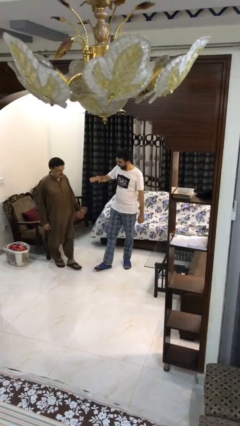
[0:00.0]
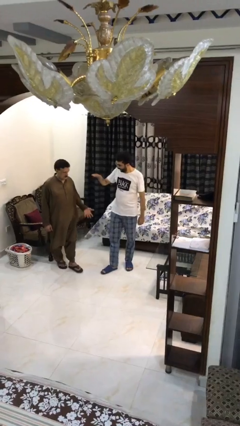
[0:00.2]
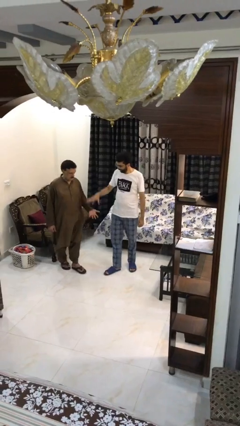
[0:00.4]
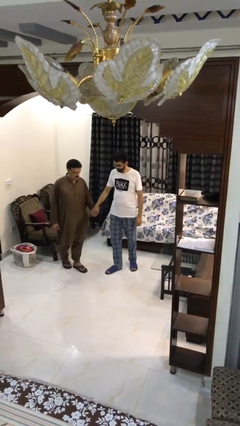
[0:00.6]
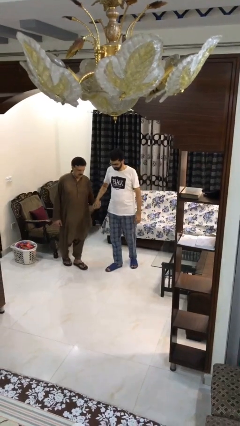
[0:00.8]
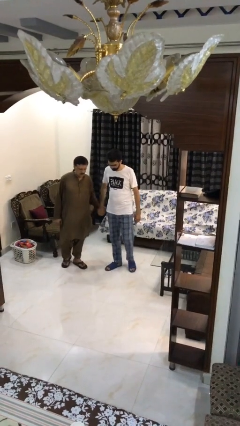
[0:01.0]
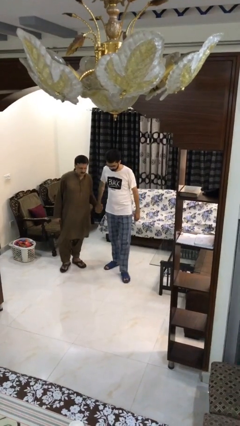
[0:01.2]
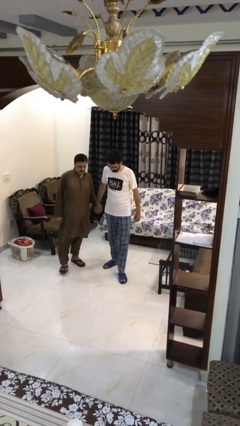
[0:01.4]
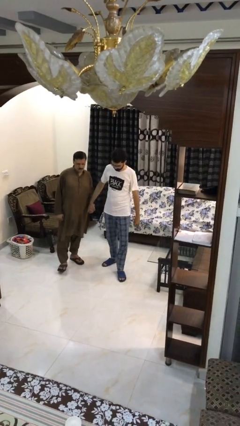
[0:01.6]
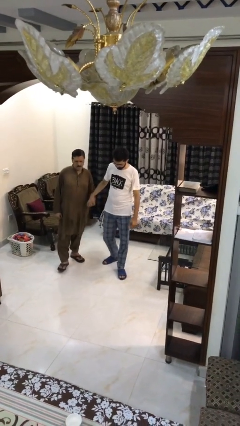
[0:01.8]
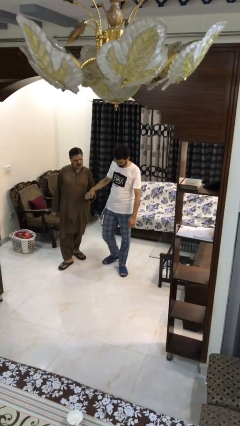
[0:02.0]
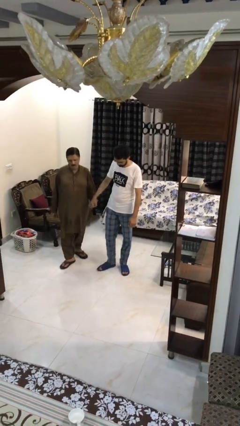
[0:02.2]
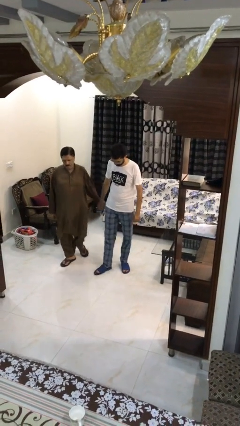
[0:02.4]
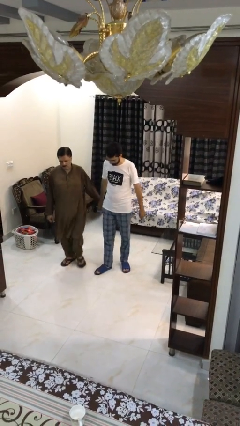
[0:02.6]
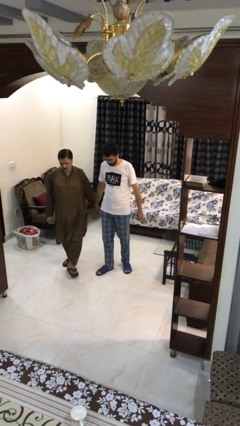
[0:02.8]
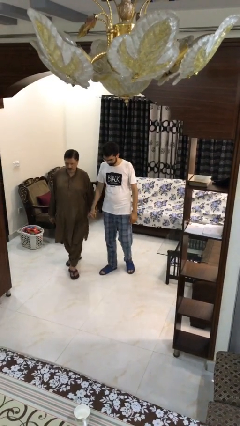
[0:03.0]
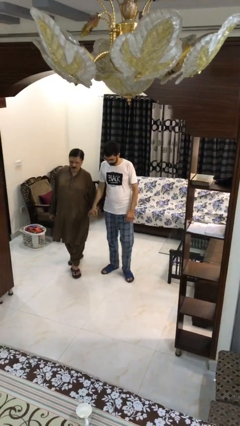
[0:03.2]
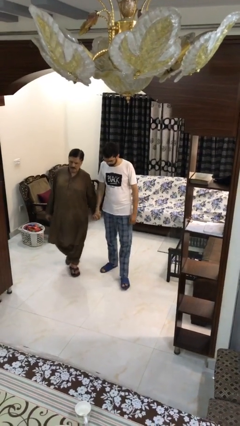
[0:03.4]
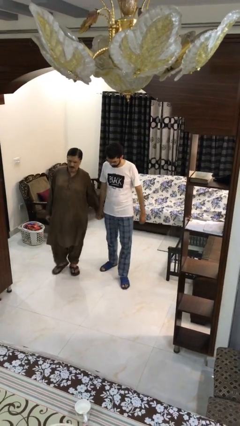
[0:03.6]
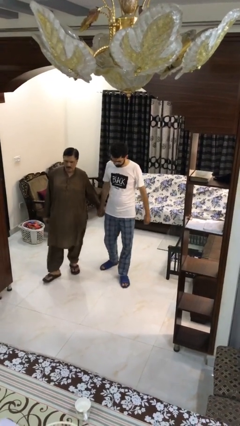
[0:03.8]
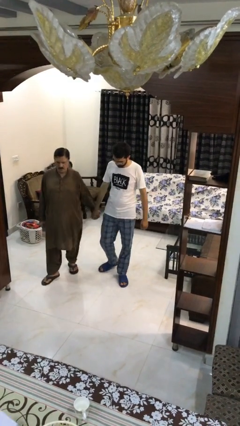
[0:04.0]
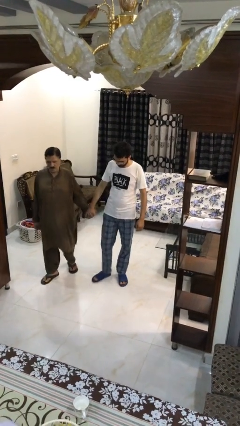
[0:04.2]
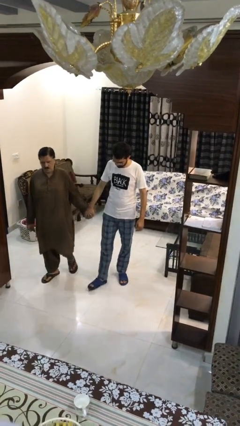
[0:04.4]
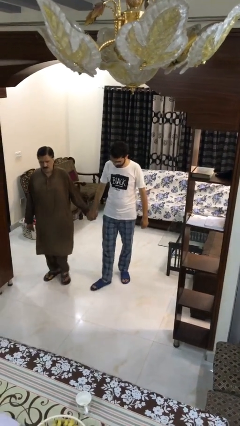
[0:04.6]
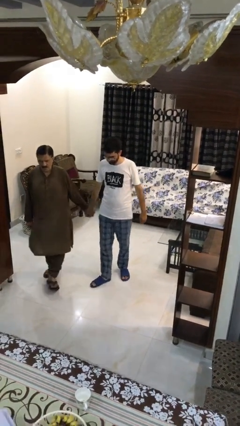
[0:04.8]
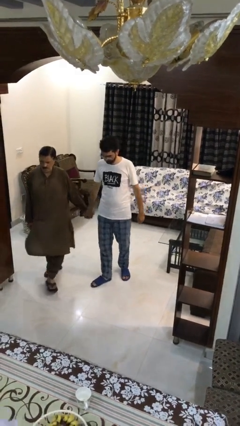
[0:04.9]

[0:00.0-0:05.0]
person holds hand

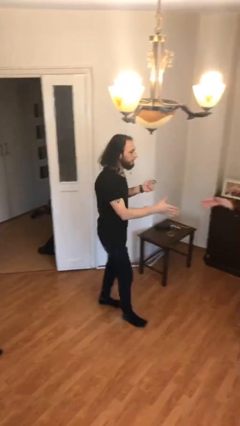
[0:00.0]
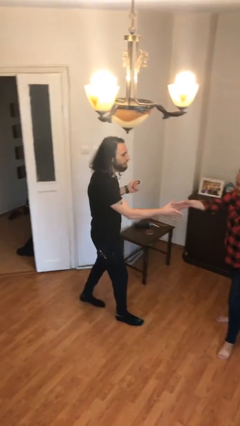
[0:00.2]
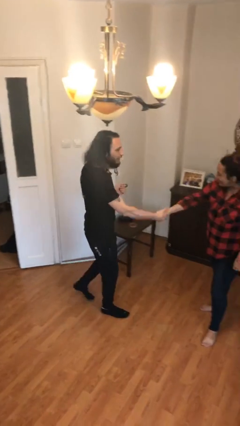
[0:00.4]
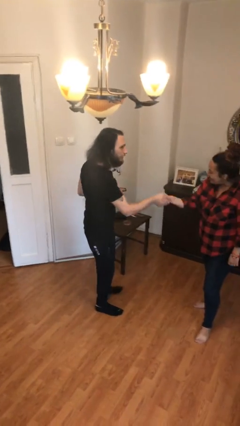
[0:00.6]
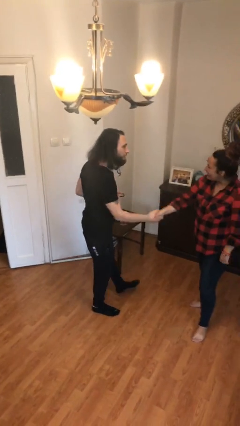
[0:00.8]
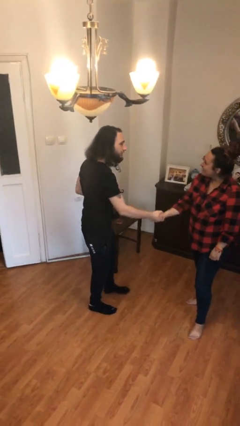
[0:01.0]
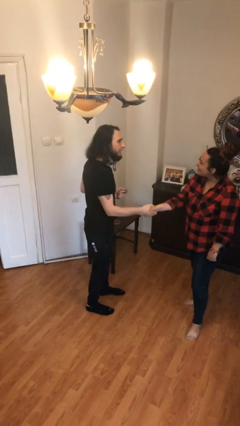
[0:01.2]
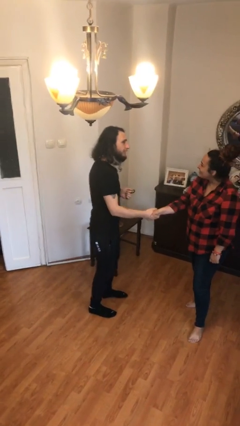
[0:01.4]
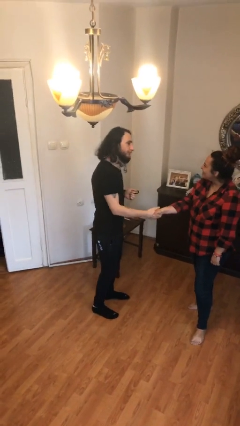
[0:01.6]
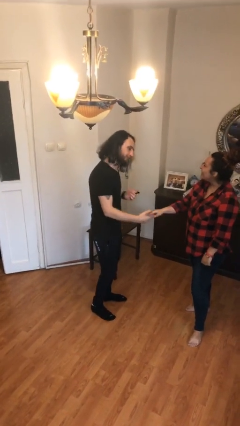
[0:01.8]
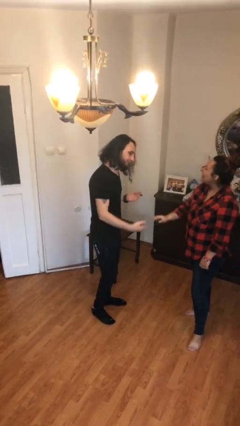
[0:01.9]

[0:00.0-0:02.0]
person shakes hand

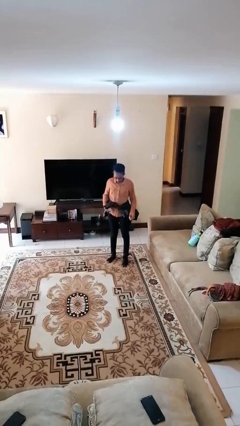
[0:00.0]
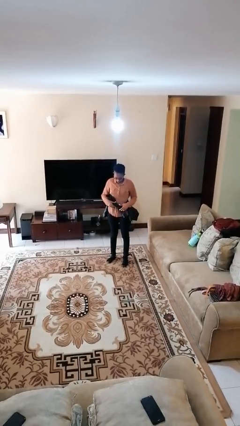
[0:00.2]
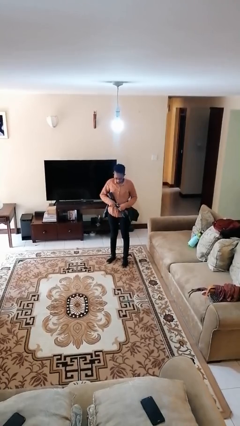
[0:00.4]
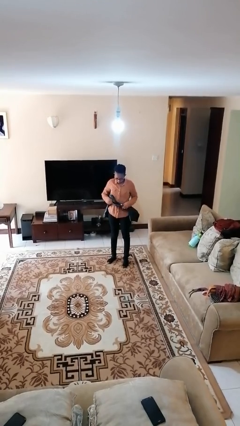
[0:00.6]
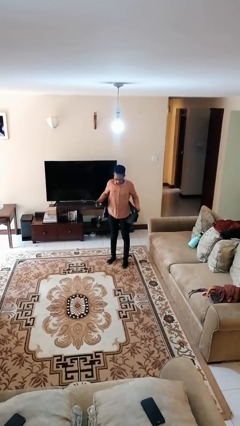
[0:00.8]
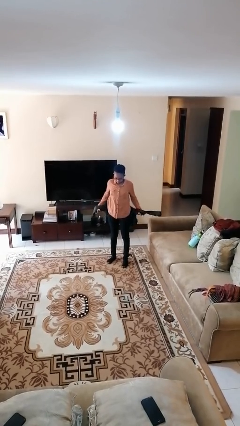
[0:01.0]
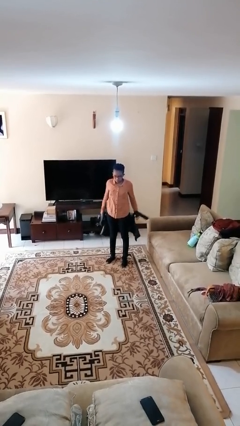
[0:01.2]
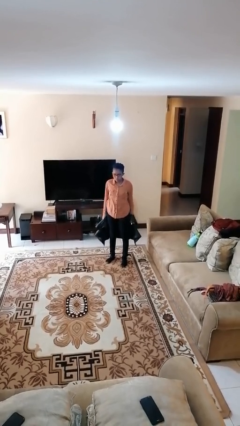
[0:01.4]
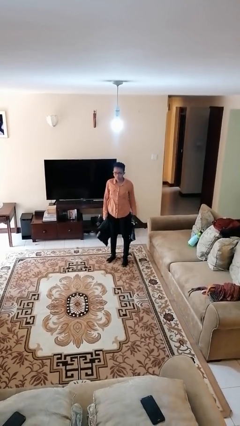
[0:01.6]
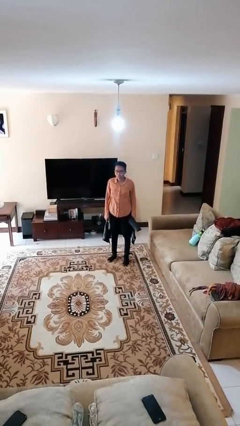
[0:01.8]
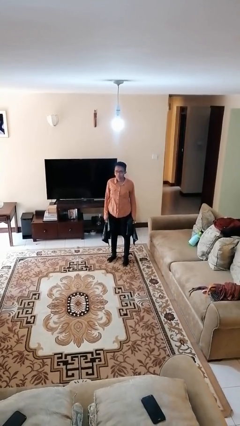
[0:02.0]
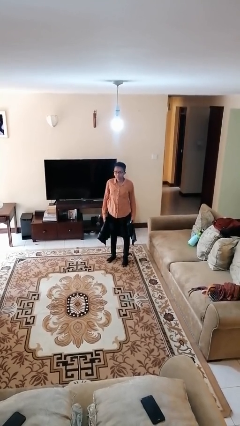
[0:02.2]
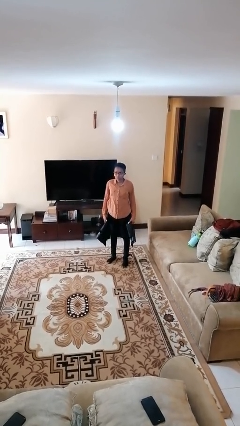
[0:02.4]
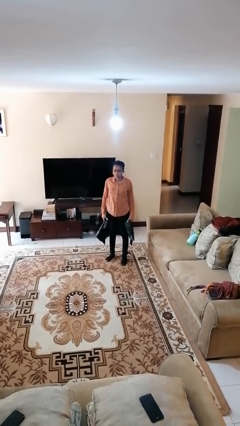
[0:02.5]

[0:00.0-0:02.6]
person unties jacket around waist

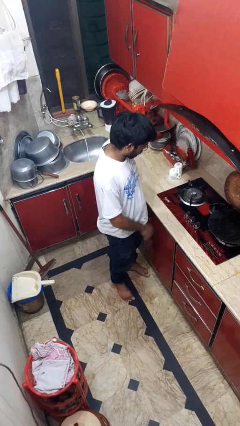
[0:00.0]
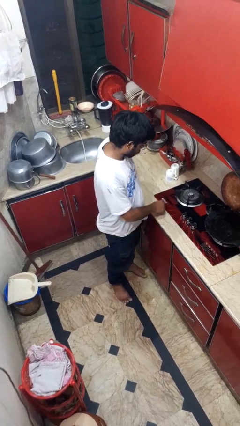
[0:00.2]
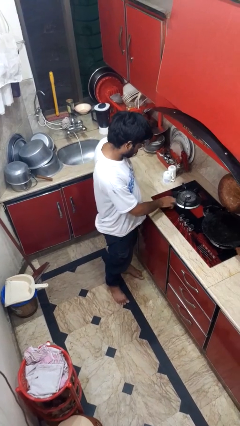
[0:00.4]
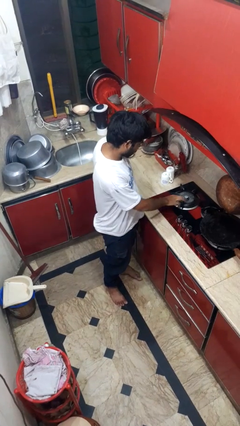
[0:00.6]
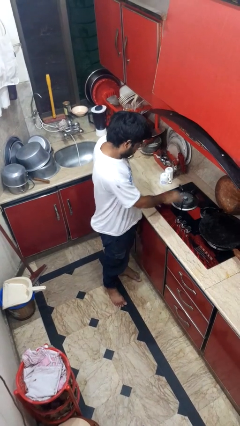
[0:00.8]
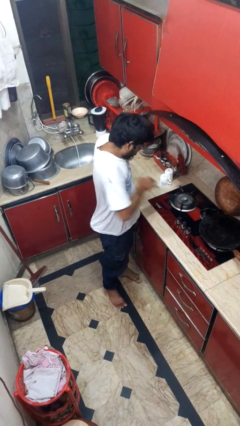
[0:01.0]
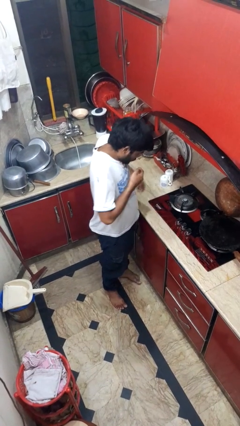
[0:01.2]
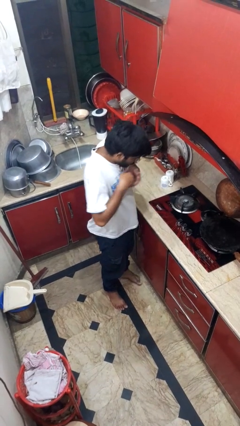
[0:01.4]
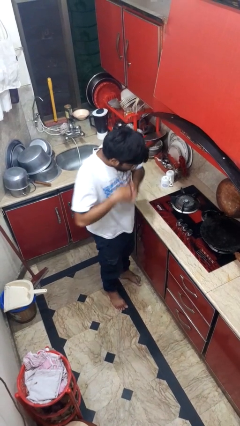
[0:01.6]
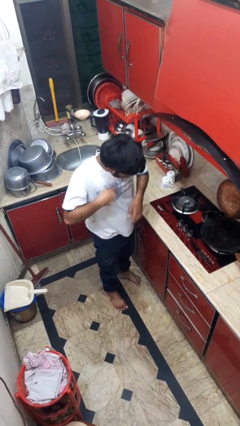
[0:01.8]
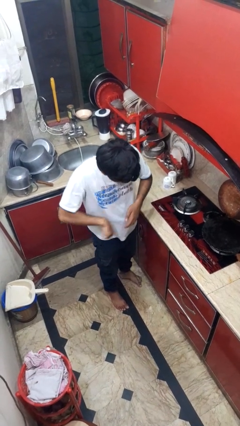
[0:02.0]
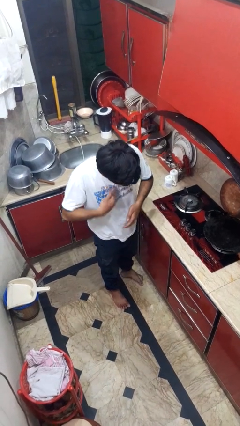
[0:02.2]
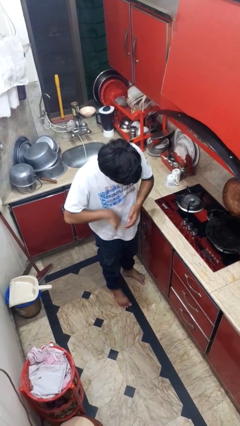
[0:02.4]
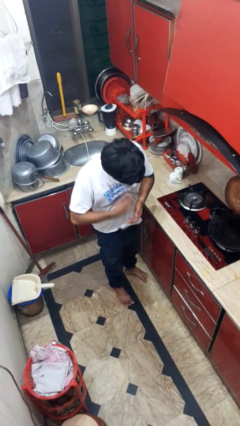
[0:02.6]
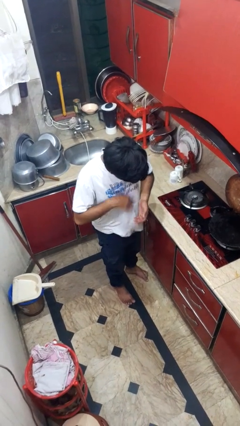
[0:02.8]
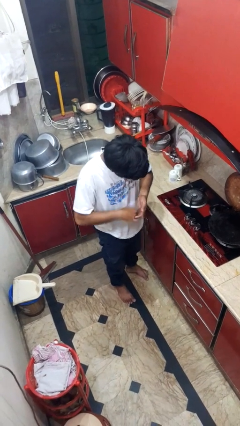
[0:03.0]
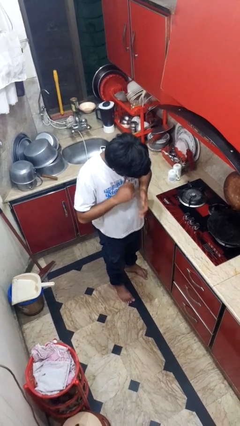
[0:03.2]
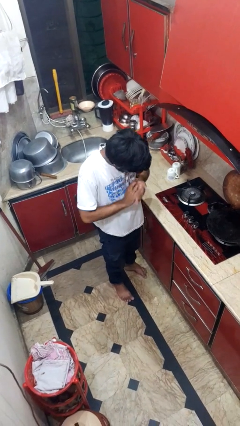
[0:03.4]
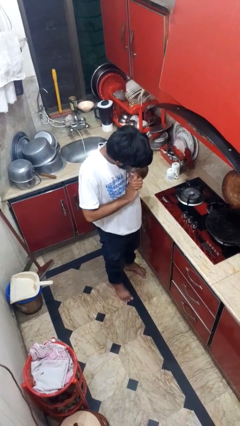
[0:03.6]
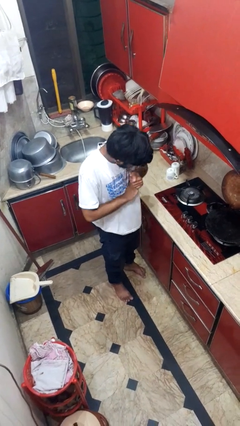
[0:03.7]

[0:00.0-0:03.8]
person burns hand

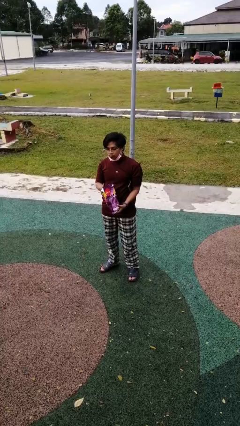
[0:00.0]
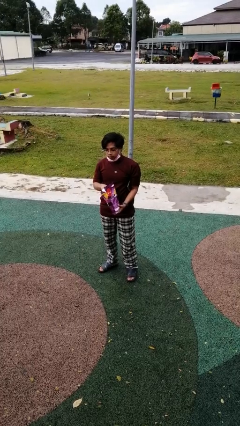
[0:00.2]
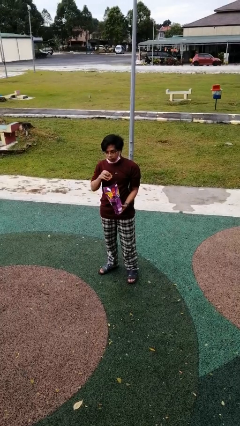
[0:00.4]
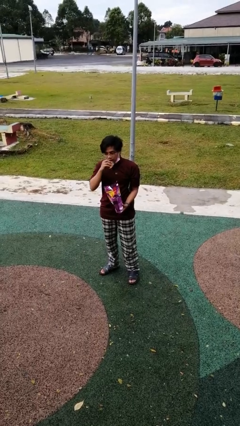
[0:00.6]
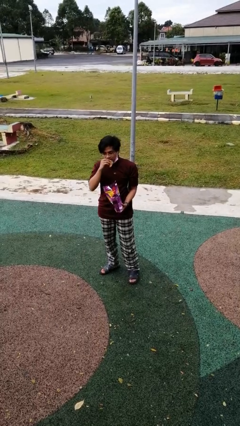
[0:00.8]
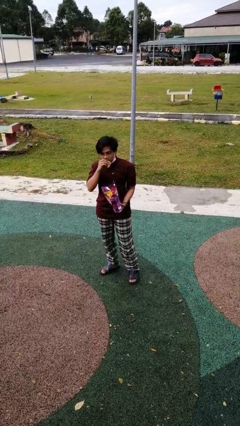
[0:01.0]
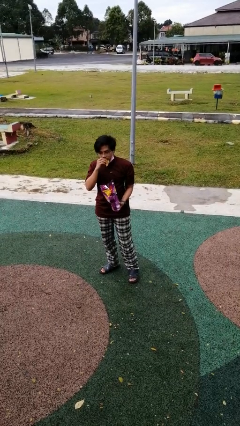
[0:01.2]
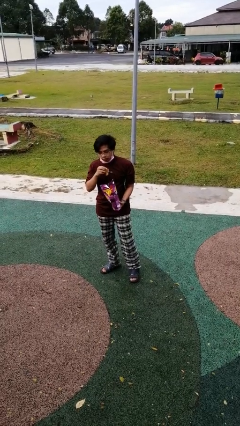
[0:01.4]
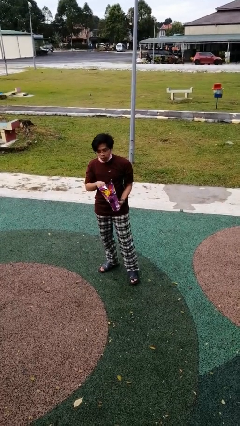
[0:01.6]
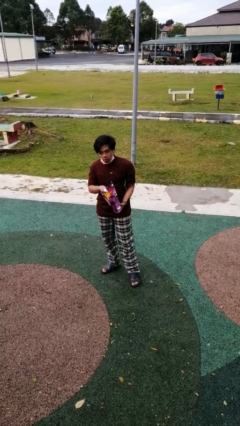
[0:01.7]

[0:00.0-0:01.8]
person eats snack from bag

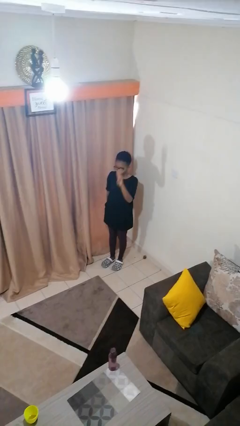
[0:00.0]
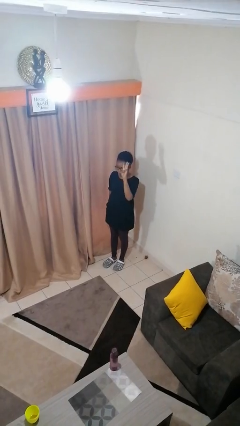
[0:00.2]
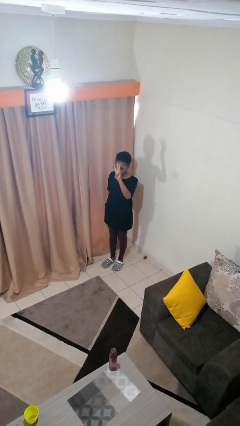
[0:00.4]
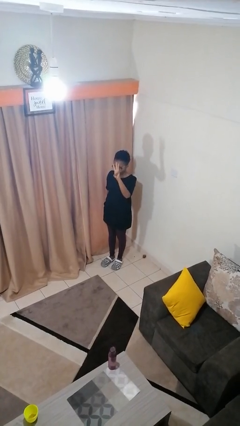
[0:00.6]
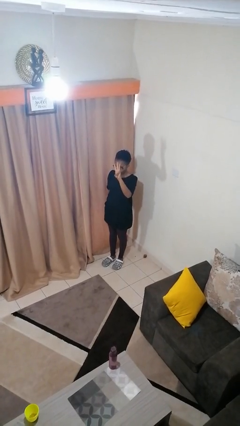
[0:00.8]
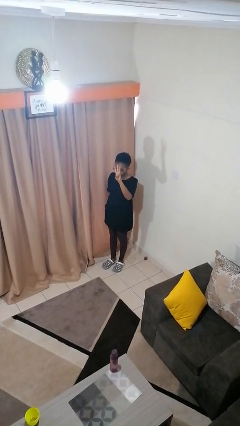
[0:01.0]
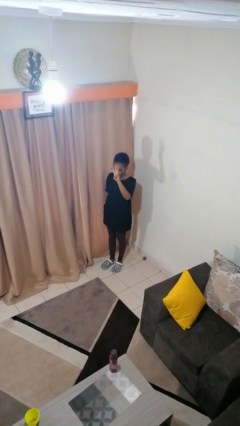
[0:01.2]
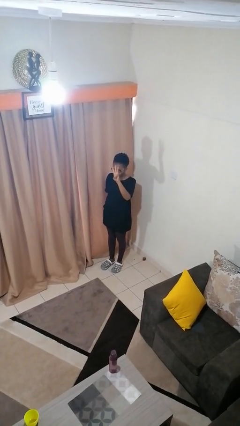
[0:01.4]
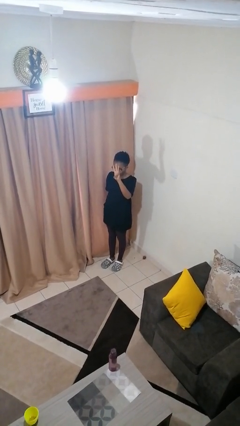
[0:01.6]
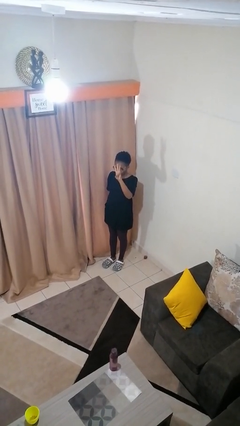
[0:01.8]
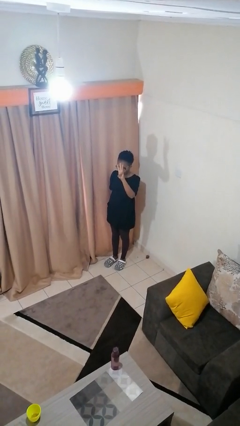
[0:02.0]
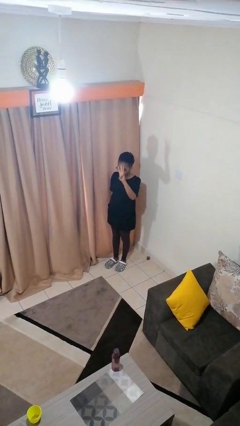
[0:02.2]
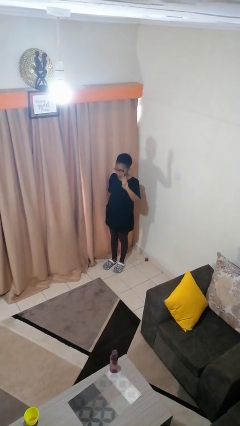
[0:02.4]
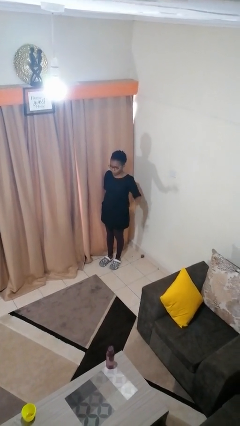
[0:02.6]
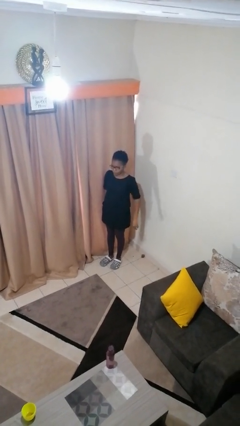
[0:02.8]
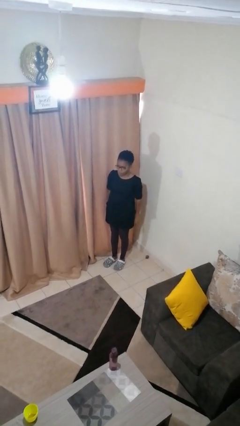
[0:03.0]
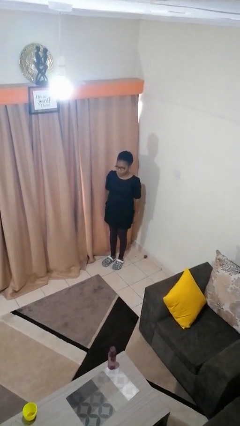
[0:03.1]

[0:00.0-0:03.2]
person gestures number three
